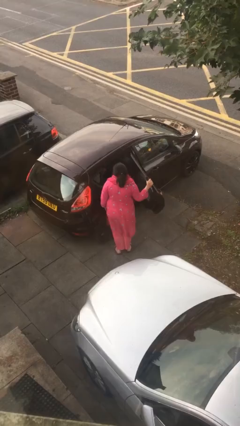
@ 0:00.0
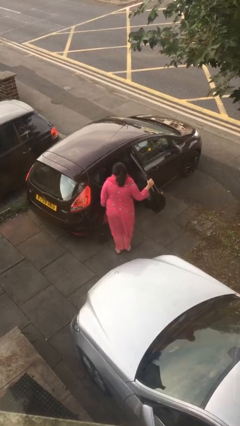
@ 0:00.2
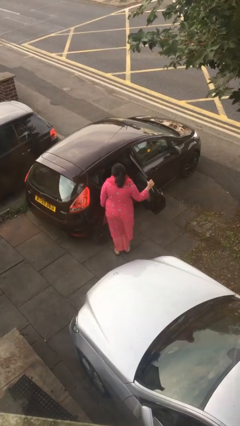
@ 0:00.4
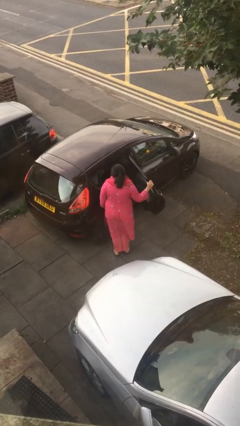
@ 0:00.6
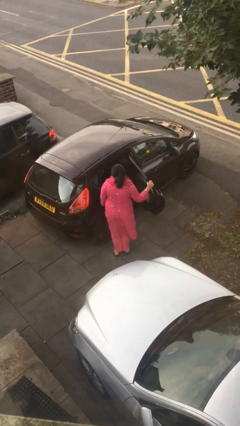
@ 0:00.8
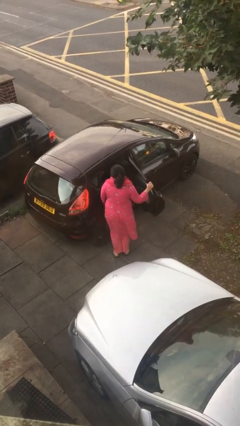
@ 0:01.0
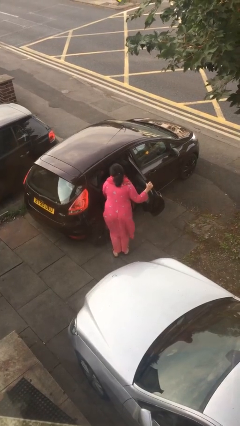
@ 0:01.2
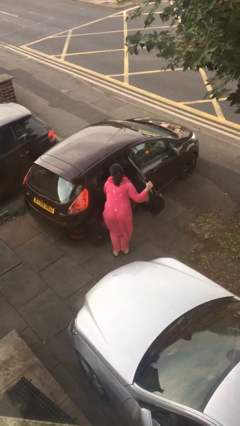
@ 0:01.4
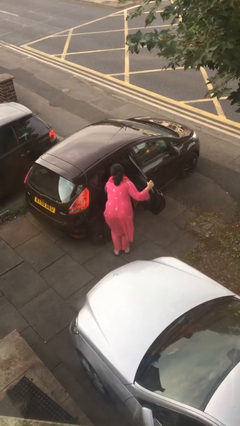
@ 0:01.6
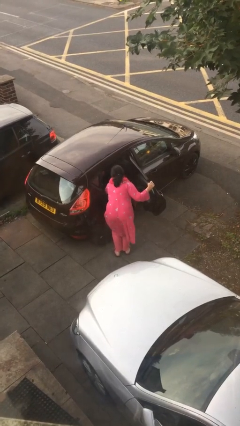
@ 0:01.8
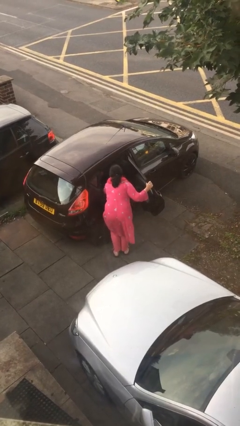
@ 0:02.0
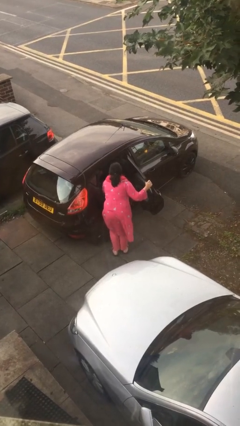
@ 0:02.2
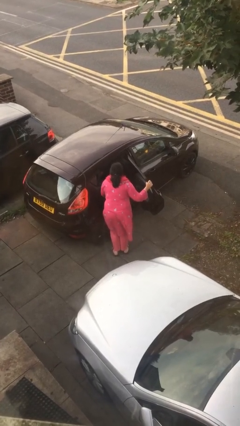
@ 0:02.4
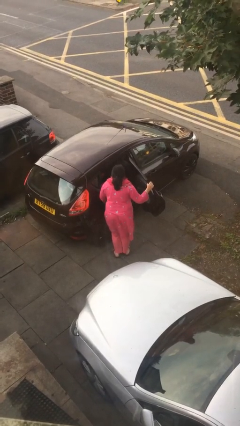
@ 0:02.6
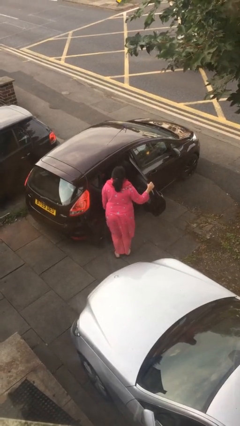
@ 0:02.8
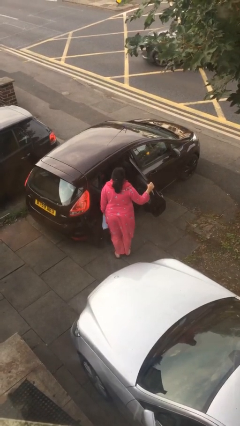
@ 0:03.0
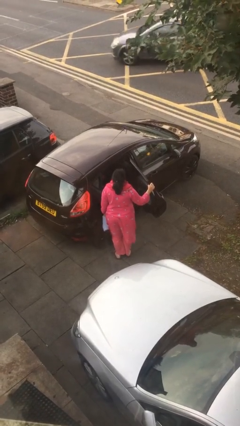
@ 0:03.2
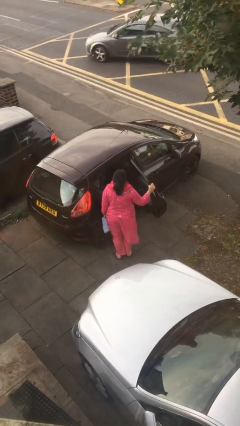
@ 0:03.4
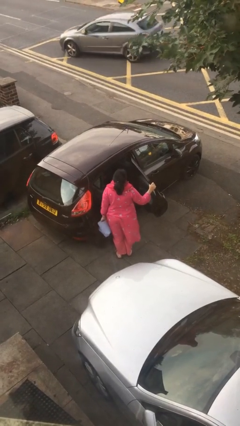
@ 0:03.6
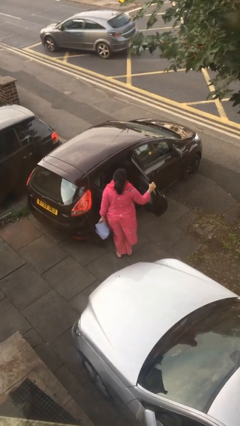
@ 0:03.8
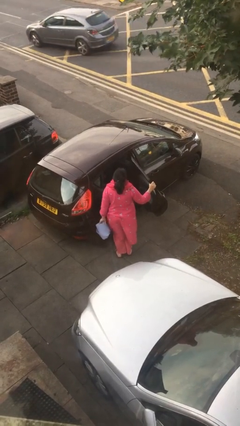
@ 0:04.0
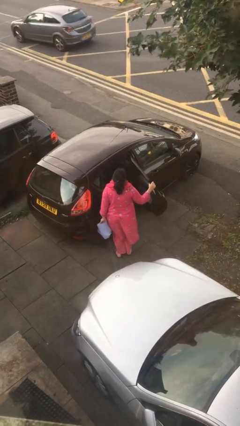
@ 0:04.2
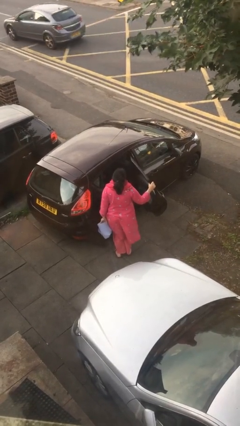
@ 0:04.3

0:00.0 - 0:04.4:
person unloads car

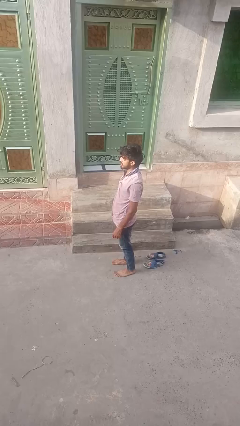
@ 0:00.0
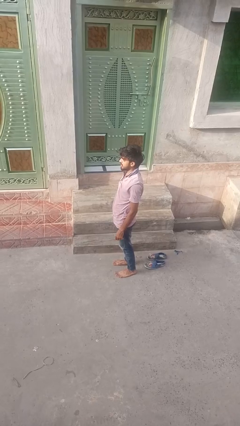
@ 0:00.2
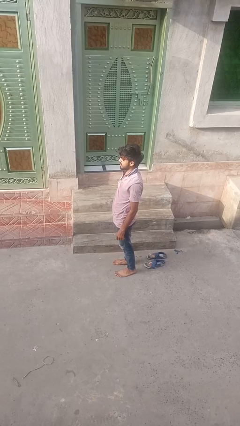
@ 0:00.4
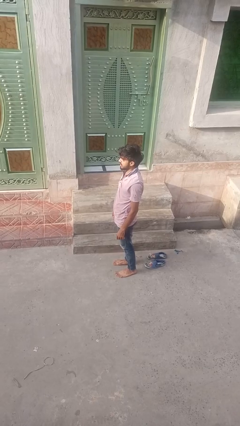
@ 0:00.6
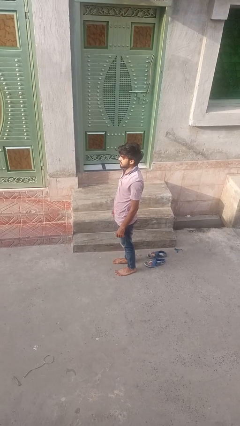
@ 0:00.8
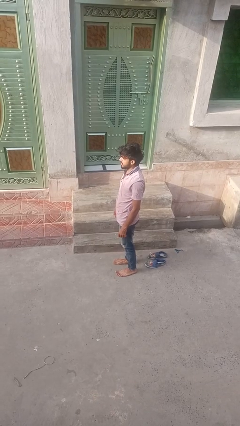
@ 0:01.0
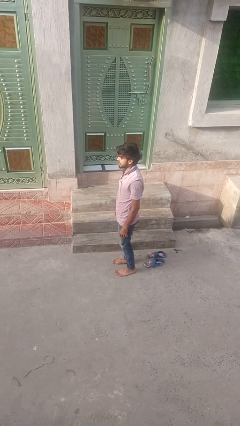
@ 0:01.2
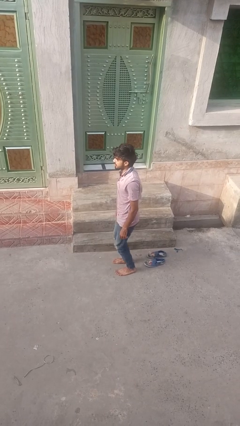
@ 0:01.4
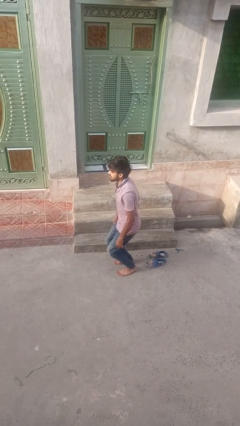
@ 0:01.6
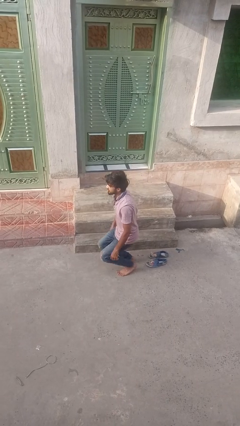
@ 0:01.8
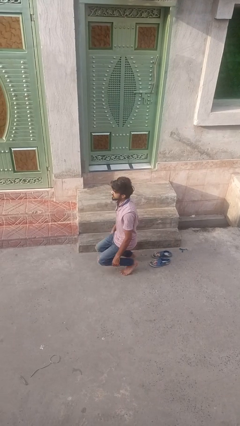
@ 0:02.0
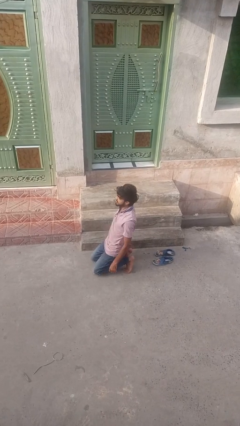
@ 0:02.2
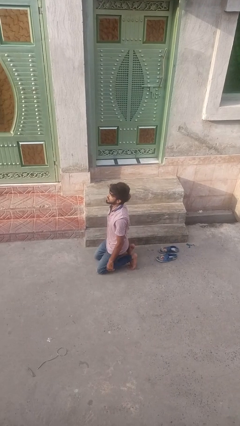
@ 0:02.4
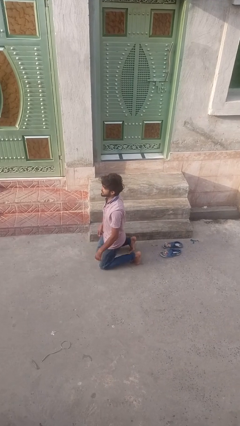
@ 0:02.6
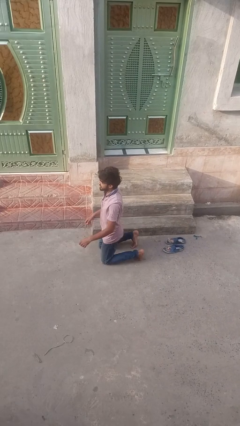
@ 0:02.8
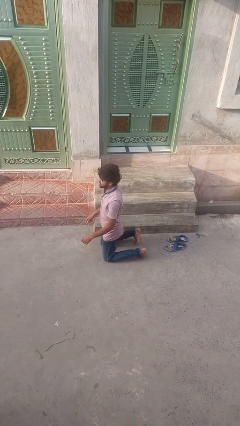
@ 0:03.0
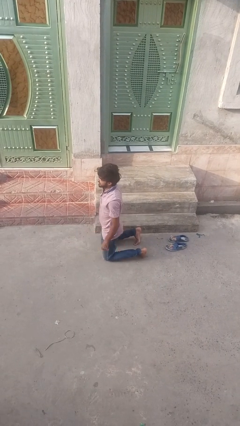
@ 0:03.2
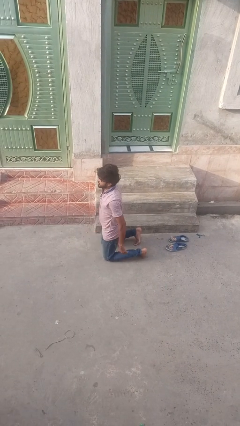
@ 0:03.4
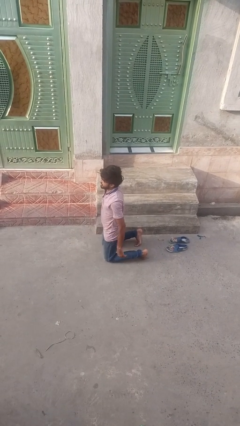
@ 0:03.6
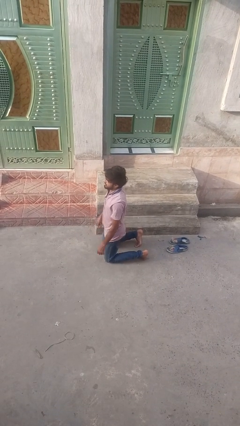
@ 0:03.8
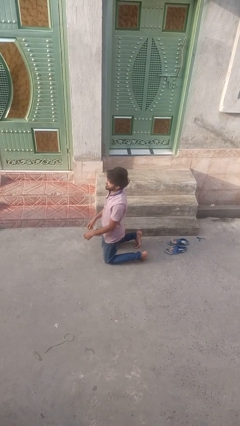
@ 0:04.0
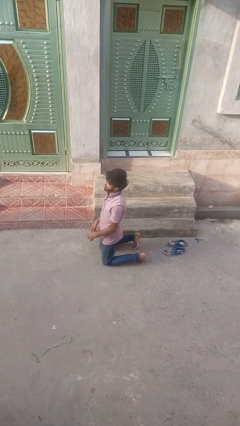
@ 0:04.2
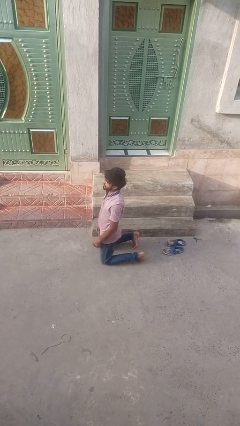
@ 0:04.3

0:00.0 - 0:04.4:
person kneels

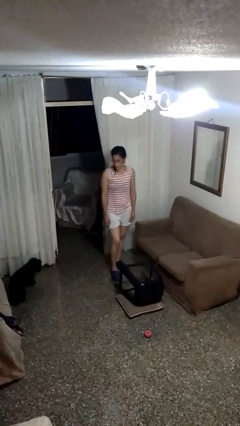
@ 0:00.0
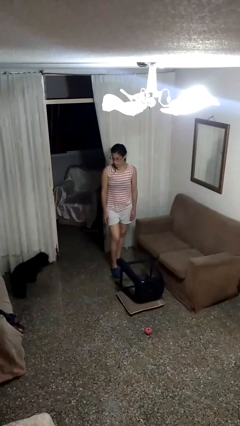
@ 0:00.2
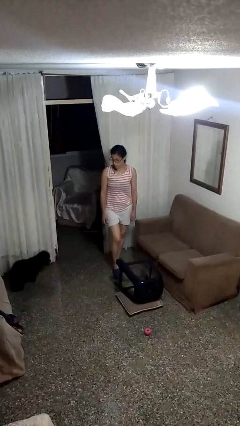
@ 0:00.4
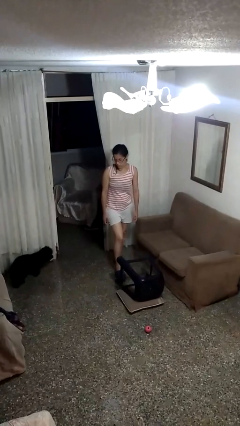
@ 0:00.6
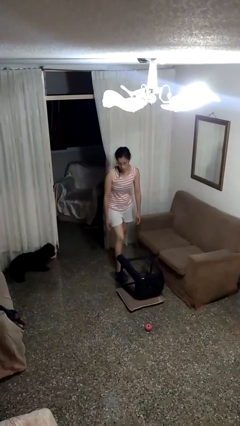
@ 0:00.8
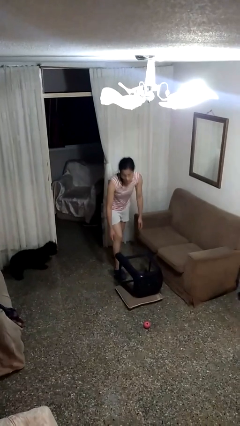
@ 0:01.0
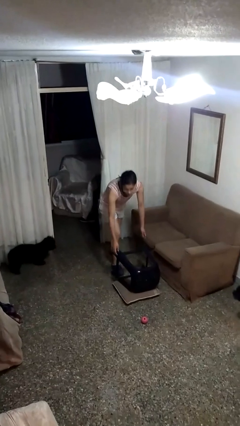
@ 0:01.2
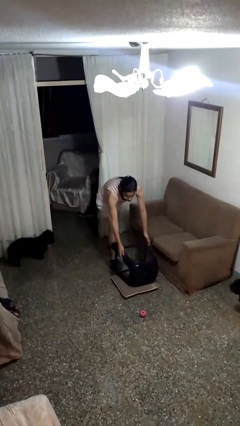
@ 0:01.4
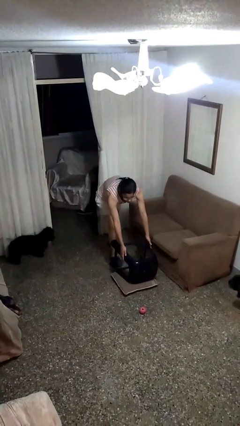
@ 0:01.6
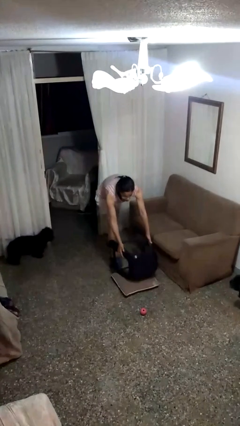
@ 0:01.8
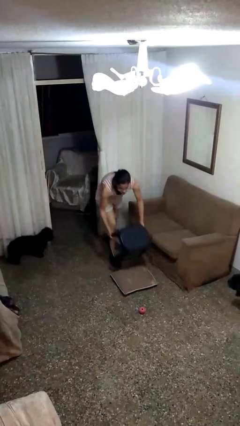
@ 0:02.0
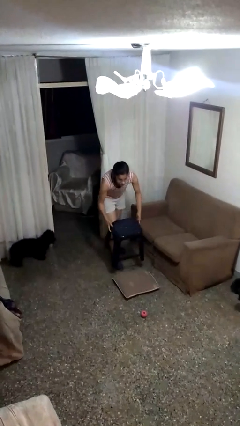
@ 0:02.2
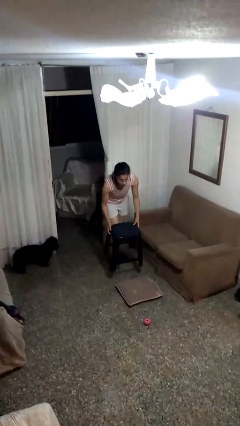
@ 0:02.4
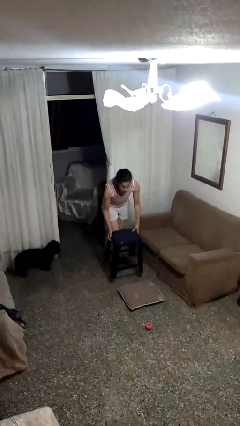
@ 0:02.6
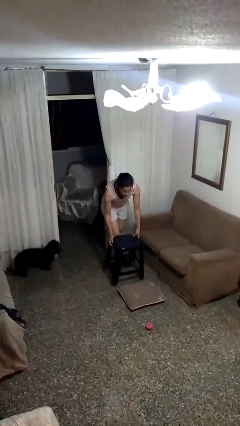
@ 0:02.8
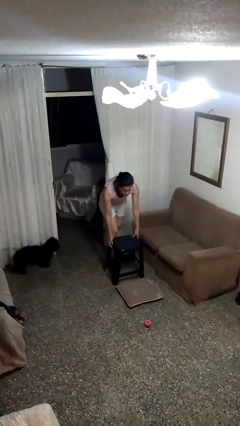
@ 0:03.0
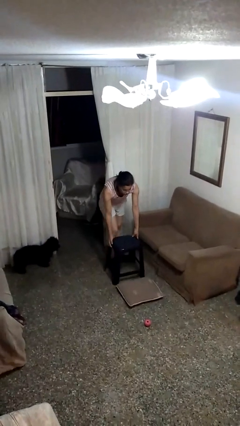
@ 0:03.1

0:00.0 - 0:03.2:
person sets upright furniture

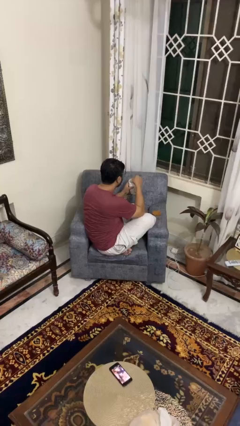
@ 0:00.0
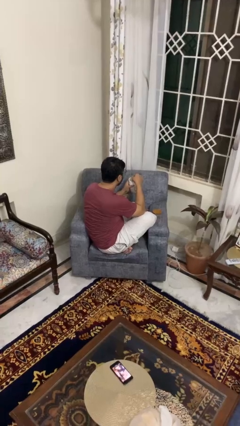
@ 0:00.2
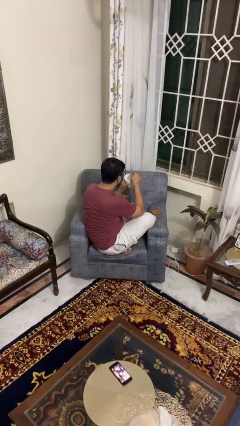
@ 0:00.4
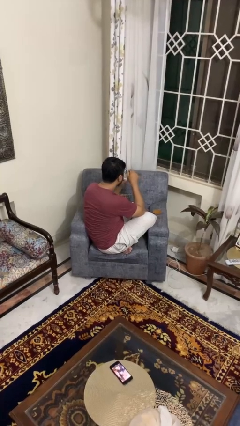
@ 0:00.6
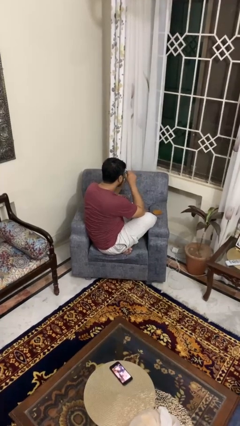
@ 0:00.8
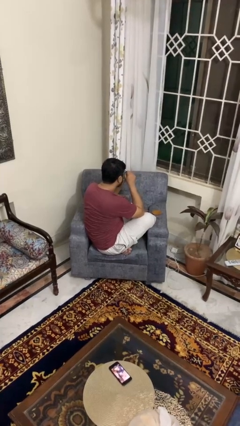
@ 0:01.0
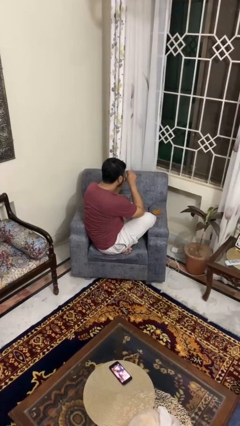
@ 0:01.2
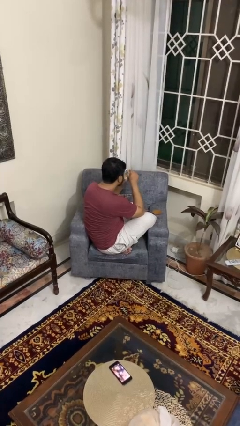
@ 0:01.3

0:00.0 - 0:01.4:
person drinks from mug

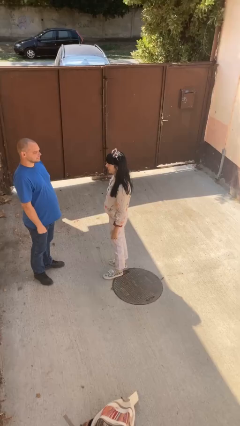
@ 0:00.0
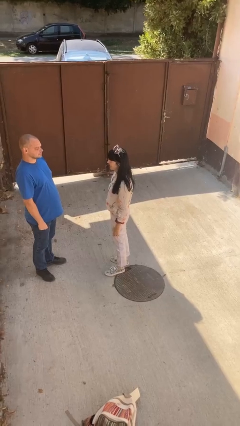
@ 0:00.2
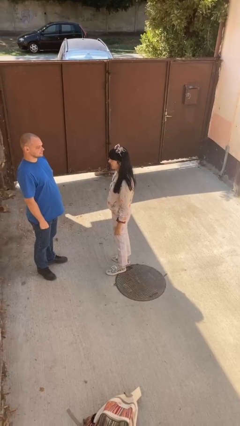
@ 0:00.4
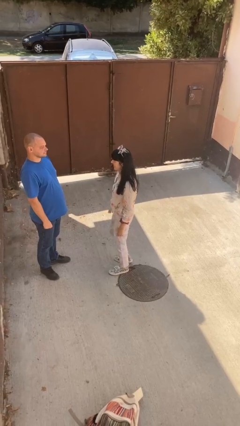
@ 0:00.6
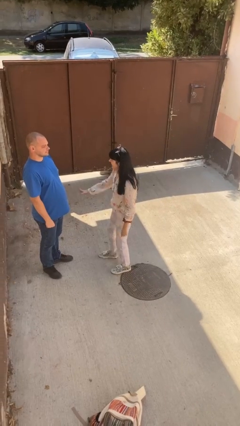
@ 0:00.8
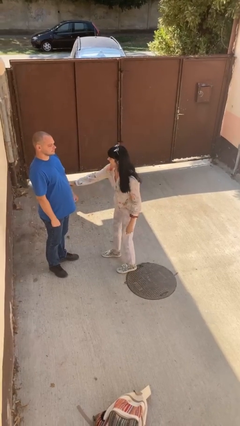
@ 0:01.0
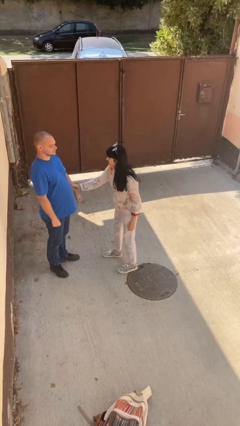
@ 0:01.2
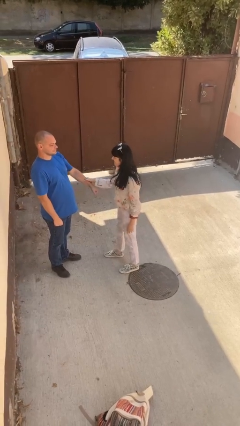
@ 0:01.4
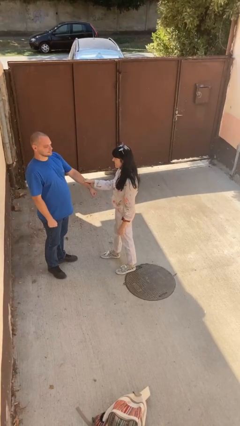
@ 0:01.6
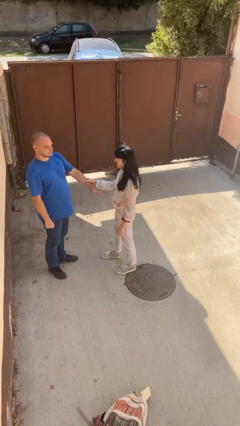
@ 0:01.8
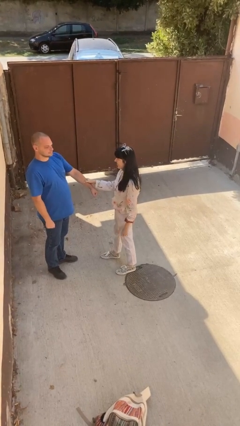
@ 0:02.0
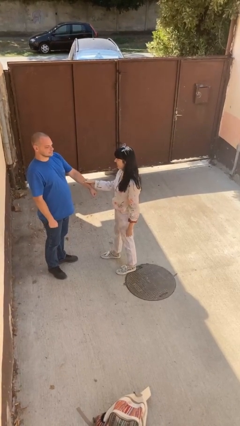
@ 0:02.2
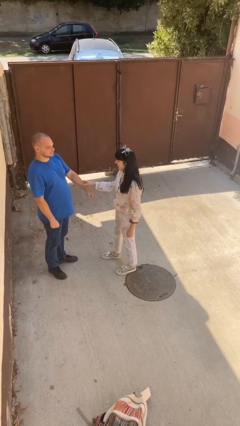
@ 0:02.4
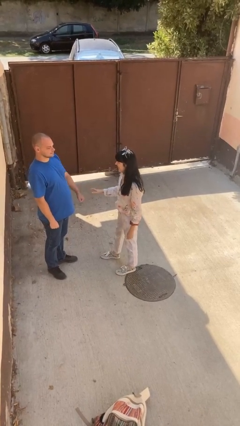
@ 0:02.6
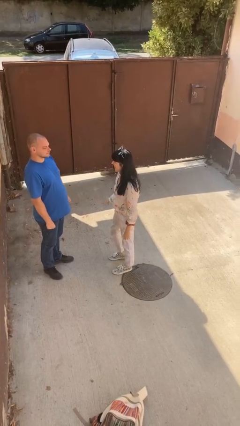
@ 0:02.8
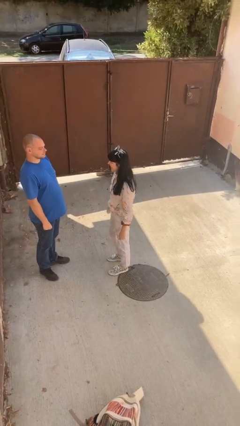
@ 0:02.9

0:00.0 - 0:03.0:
person grabs person by forearm

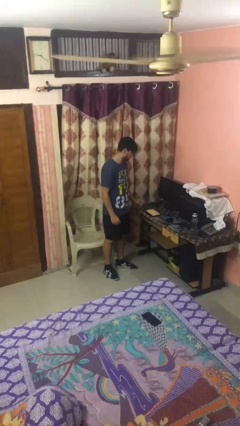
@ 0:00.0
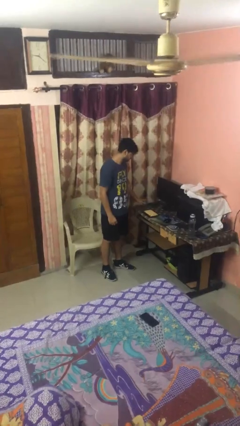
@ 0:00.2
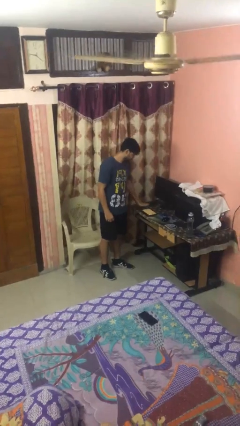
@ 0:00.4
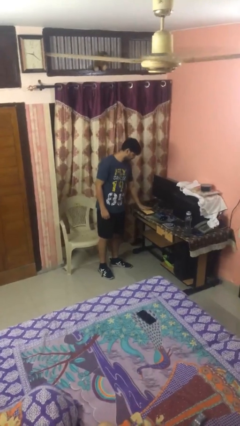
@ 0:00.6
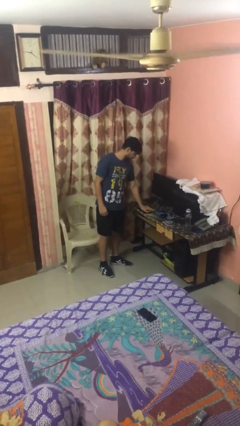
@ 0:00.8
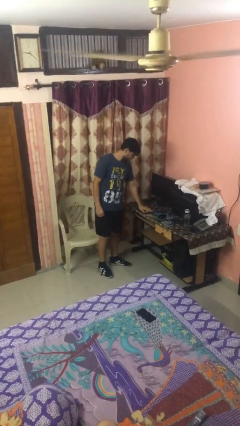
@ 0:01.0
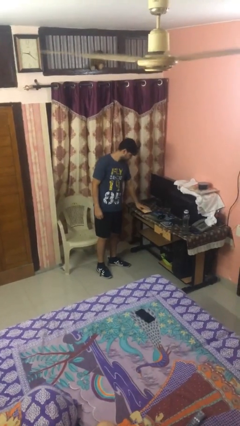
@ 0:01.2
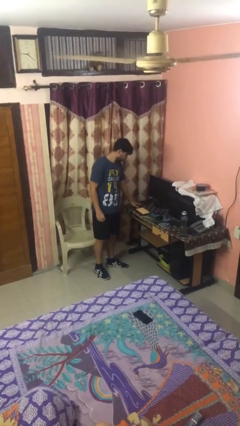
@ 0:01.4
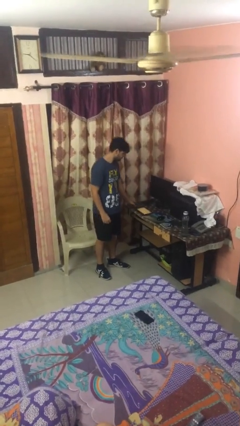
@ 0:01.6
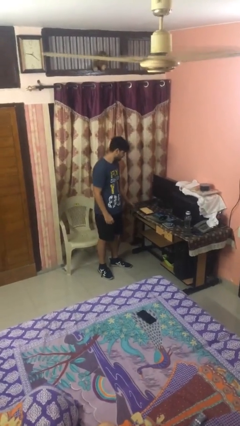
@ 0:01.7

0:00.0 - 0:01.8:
person waves hand over object
